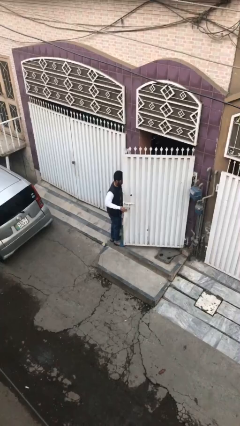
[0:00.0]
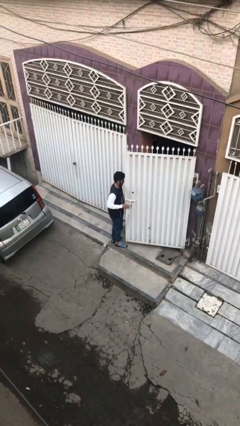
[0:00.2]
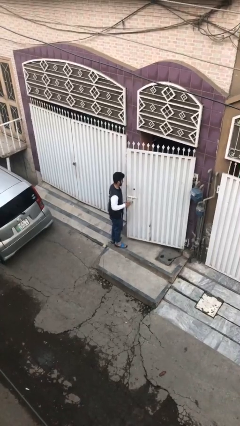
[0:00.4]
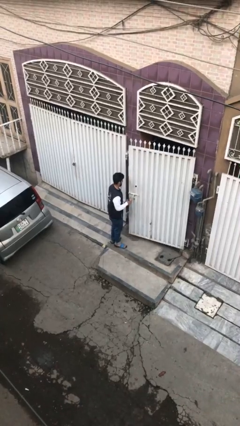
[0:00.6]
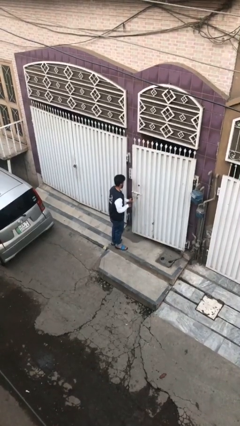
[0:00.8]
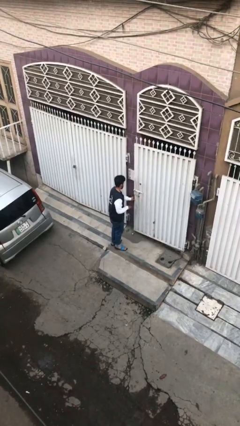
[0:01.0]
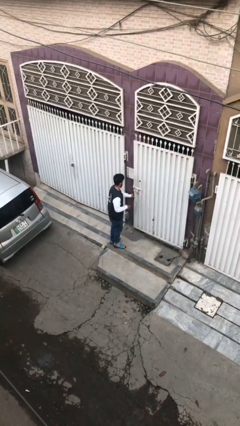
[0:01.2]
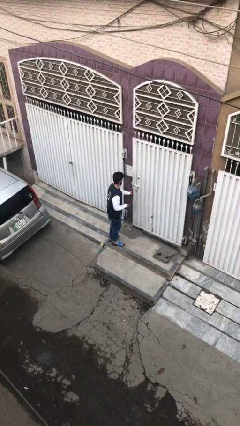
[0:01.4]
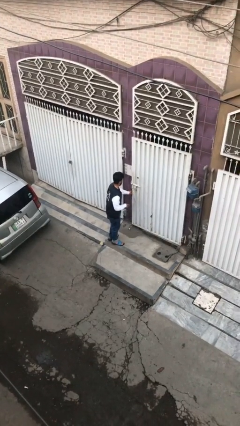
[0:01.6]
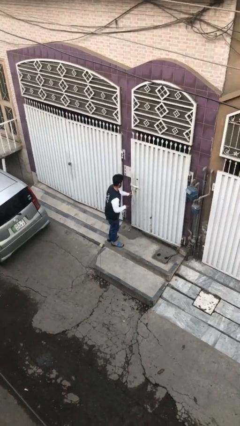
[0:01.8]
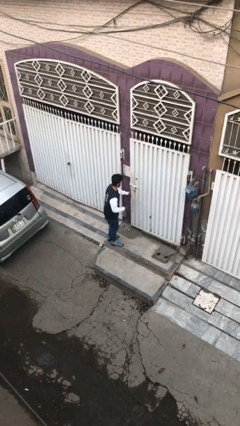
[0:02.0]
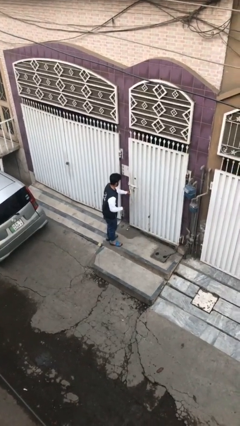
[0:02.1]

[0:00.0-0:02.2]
person closes facility door

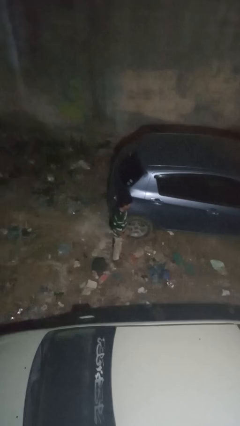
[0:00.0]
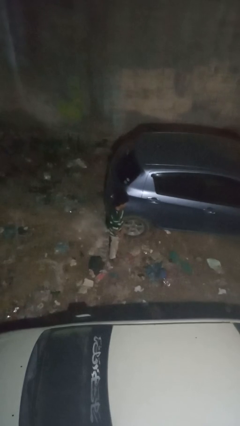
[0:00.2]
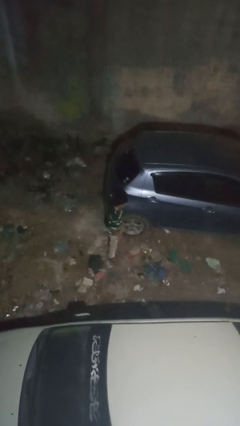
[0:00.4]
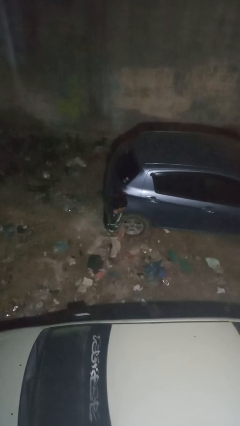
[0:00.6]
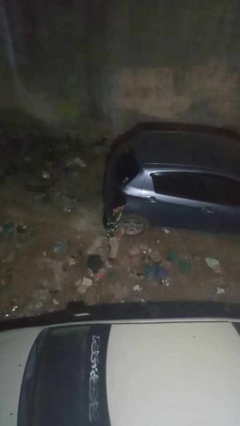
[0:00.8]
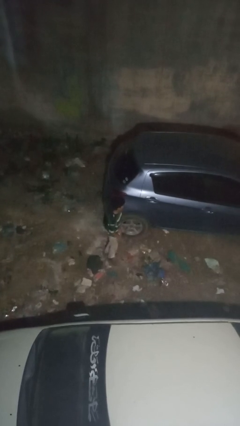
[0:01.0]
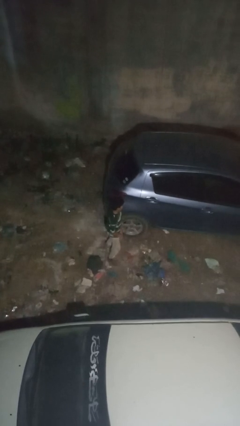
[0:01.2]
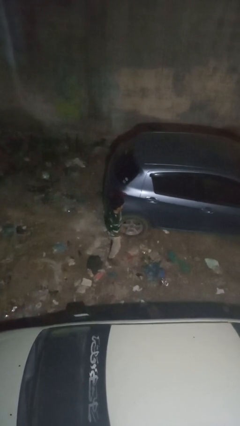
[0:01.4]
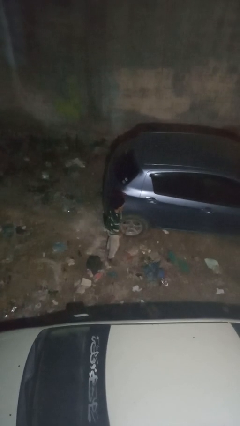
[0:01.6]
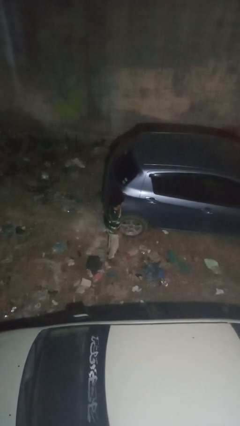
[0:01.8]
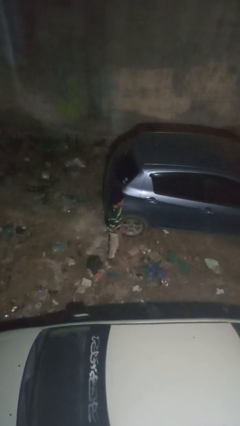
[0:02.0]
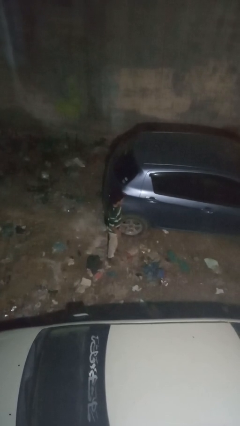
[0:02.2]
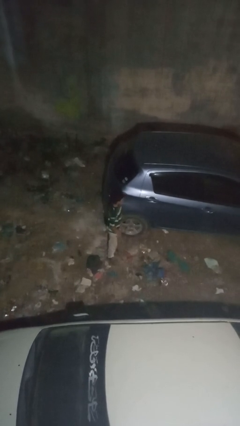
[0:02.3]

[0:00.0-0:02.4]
person kicks car tires

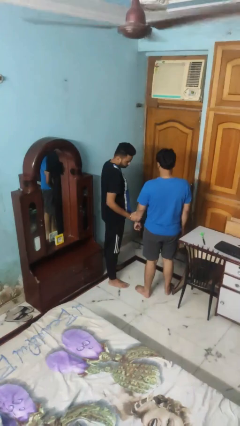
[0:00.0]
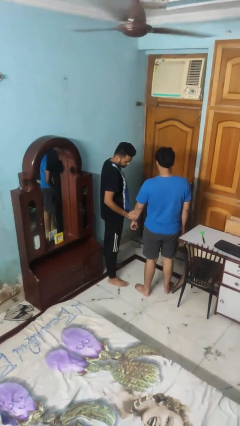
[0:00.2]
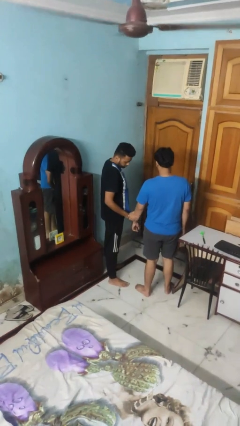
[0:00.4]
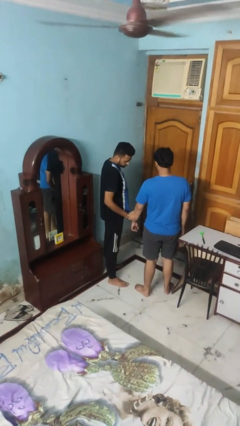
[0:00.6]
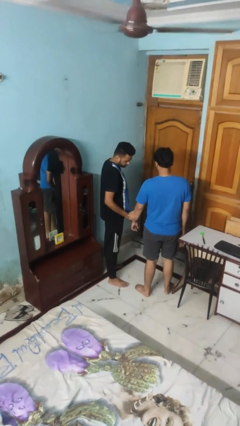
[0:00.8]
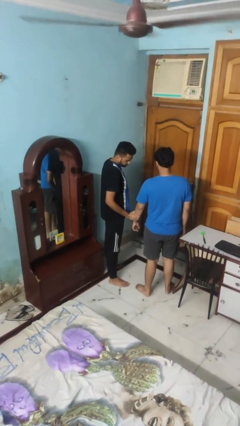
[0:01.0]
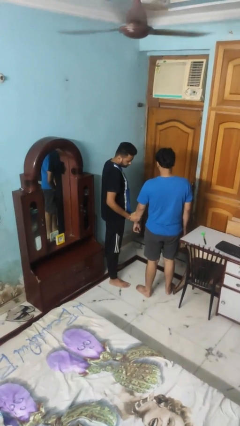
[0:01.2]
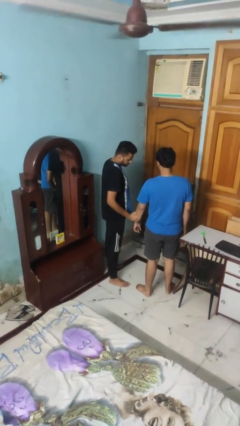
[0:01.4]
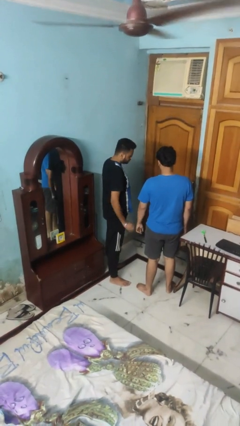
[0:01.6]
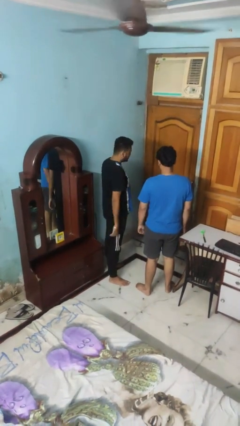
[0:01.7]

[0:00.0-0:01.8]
person grabs person by forearm

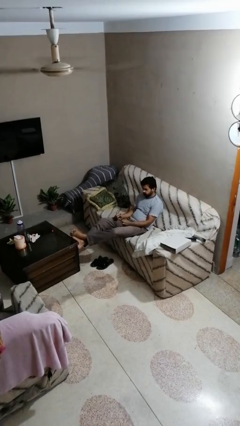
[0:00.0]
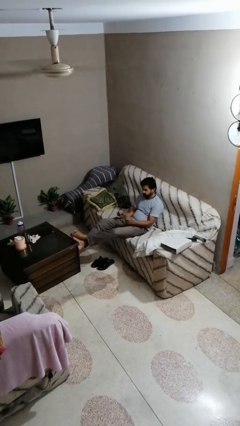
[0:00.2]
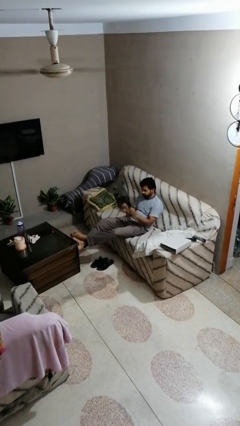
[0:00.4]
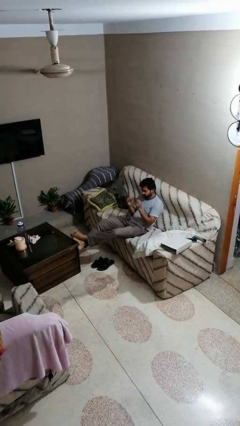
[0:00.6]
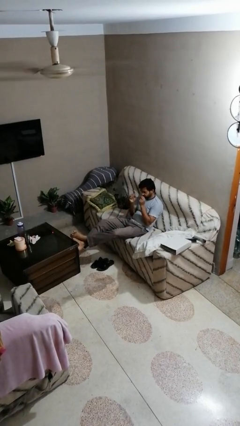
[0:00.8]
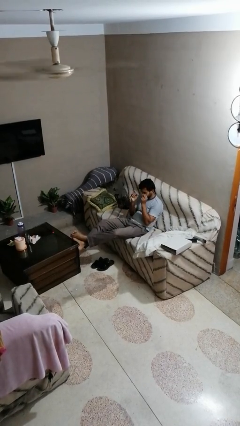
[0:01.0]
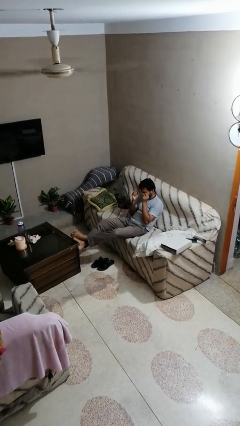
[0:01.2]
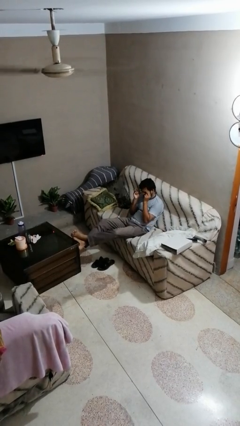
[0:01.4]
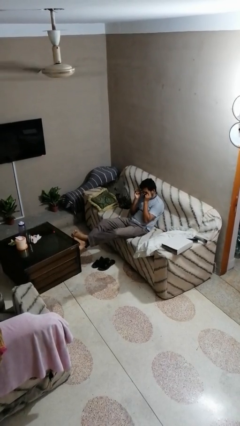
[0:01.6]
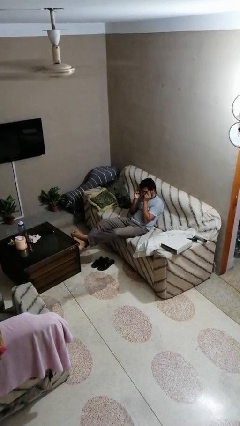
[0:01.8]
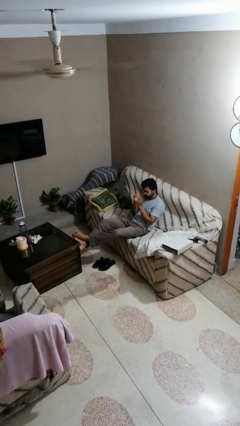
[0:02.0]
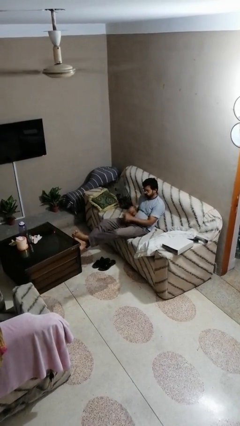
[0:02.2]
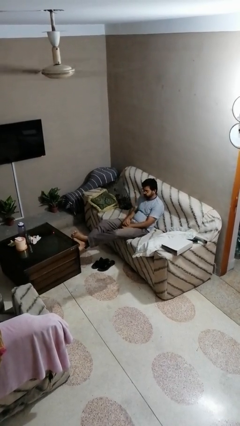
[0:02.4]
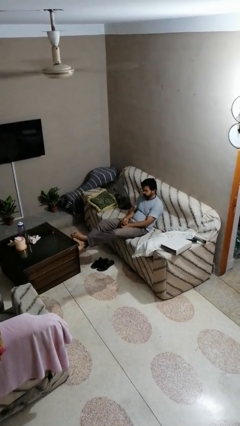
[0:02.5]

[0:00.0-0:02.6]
person puts on glasses

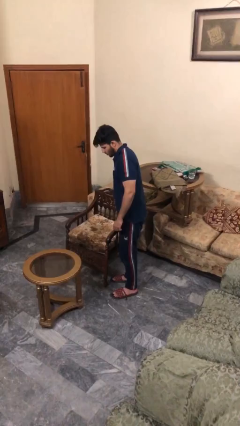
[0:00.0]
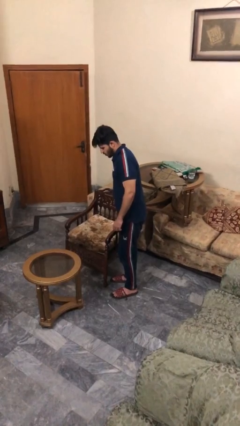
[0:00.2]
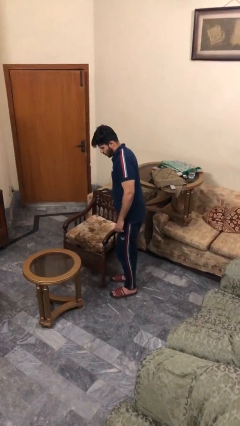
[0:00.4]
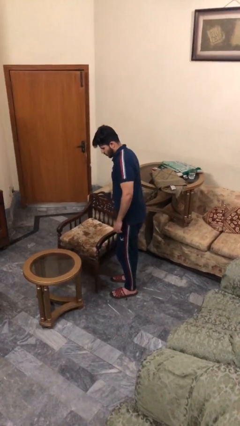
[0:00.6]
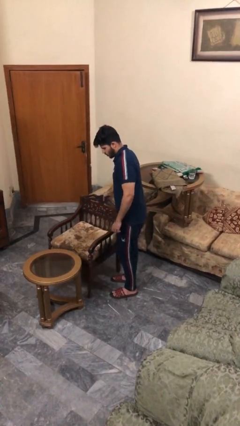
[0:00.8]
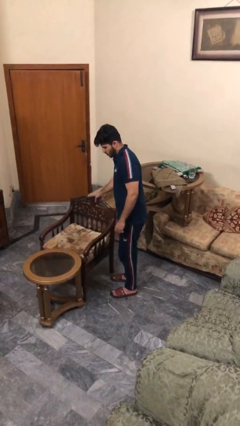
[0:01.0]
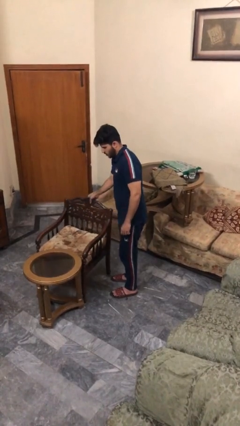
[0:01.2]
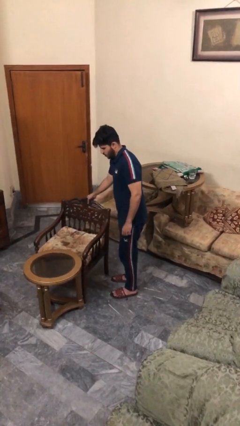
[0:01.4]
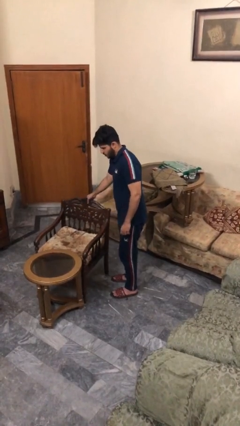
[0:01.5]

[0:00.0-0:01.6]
person pushes in chair

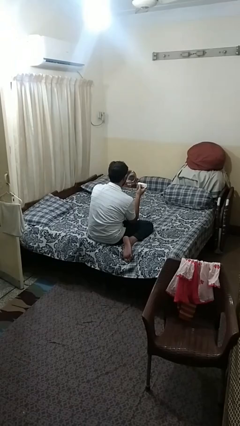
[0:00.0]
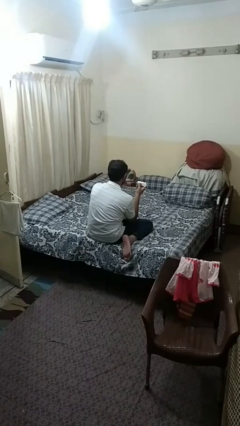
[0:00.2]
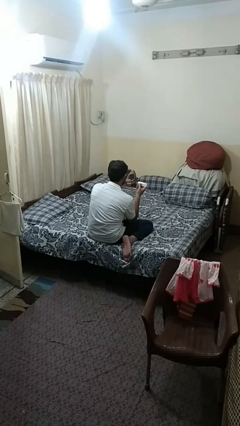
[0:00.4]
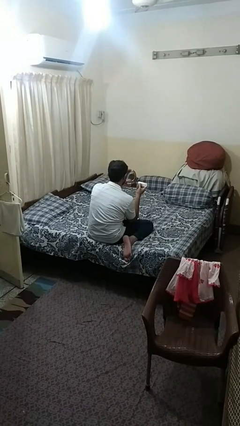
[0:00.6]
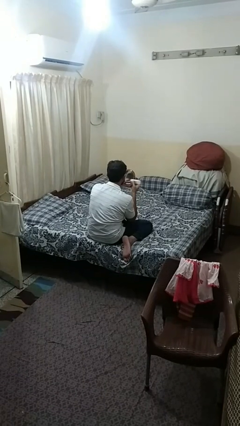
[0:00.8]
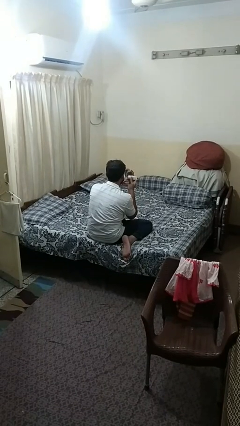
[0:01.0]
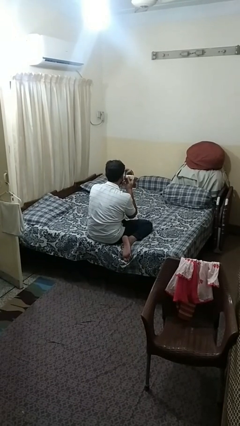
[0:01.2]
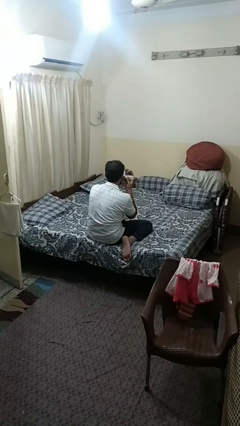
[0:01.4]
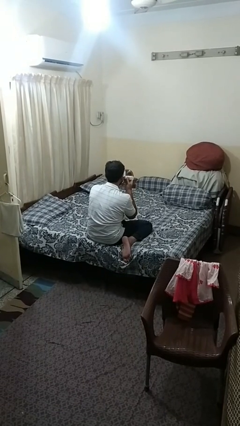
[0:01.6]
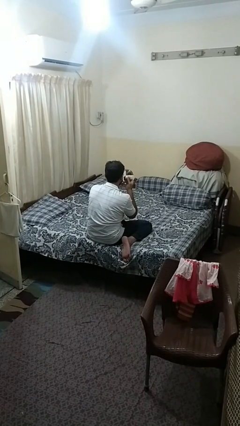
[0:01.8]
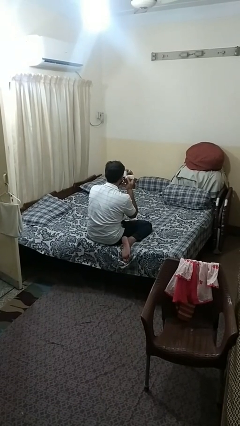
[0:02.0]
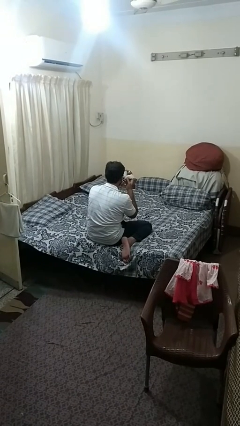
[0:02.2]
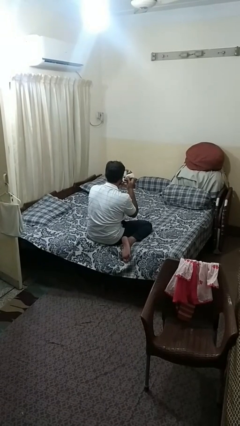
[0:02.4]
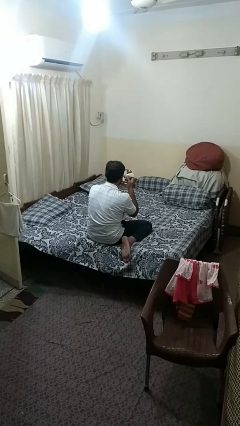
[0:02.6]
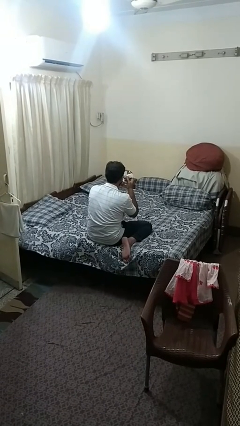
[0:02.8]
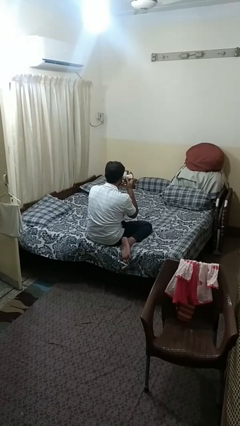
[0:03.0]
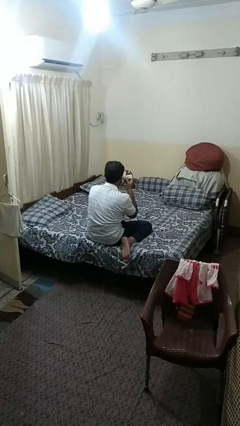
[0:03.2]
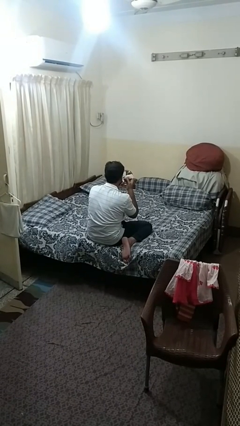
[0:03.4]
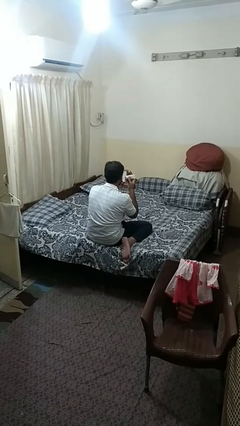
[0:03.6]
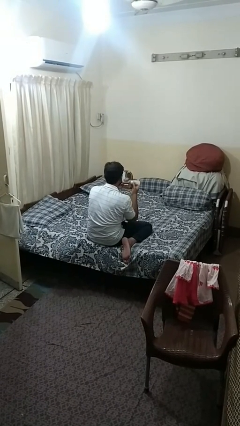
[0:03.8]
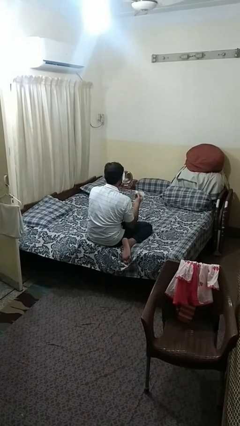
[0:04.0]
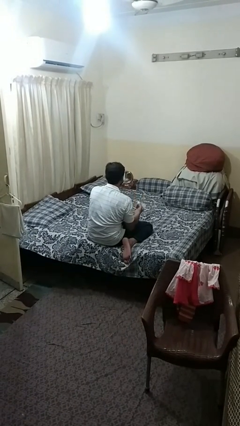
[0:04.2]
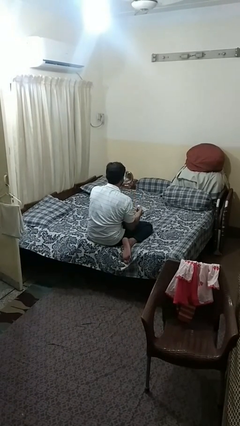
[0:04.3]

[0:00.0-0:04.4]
person applies foundation makeup

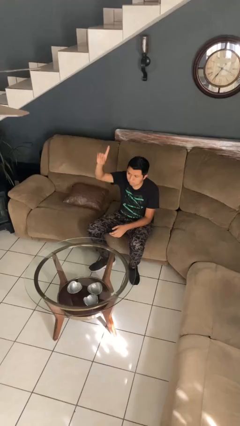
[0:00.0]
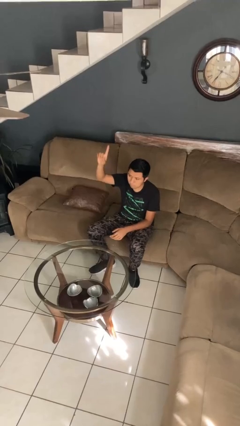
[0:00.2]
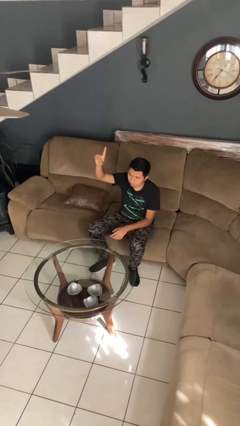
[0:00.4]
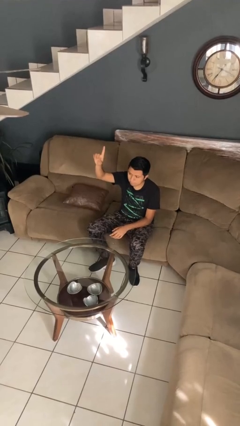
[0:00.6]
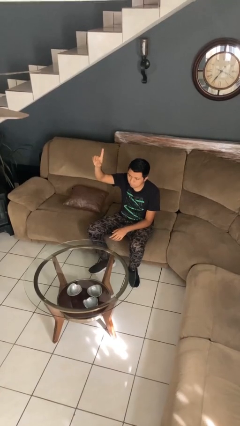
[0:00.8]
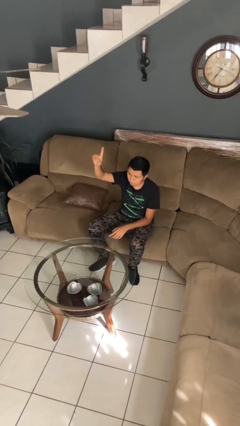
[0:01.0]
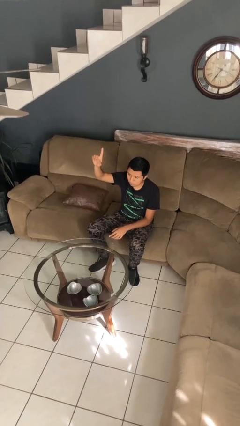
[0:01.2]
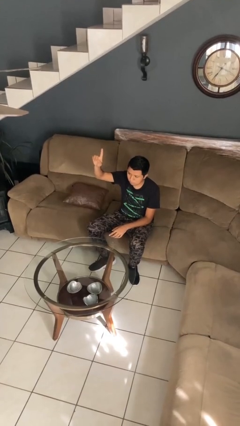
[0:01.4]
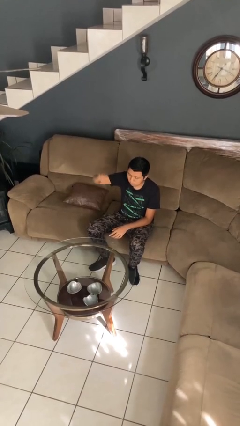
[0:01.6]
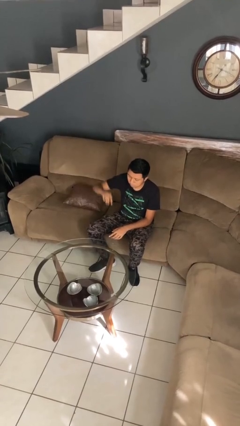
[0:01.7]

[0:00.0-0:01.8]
person gestures number one

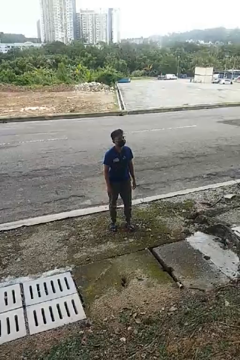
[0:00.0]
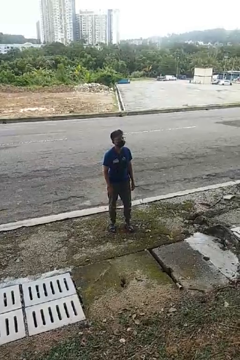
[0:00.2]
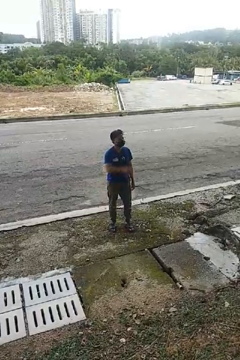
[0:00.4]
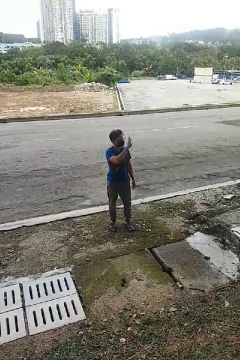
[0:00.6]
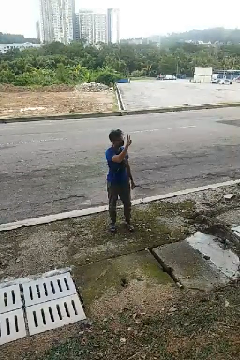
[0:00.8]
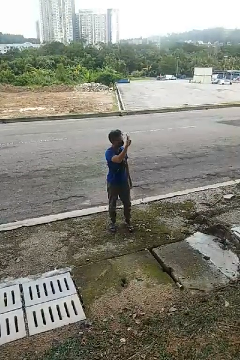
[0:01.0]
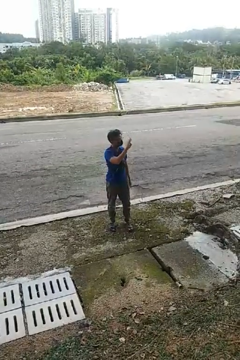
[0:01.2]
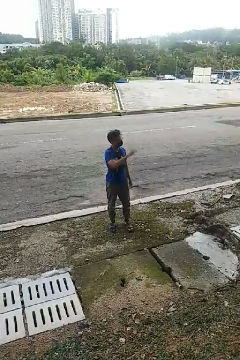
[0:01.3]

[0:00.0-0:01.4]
person gestures number three
